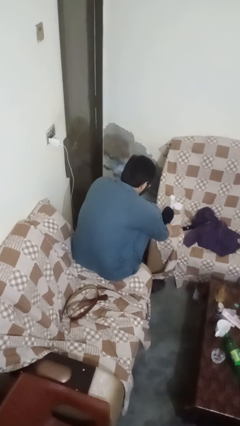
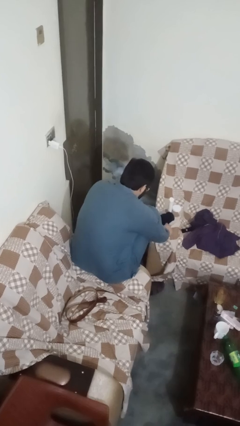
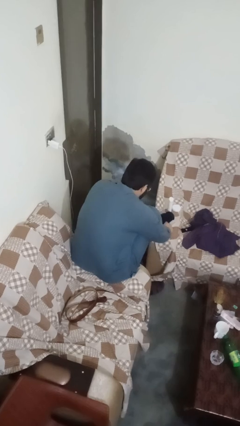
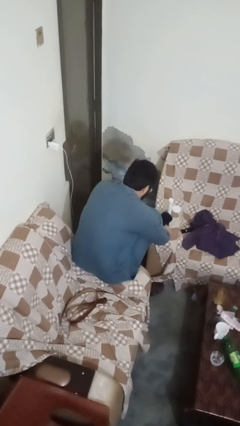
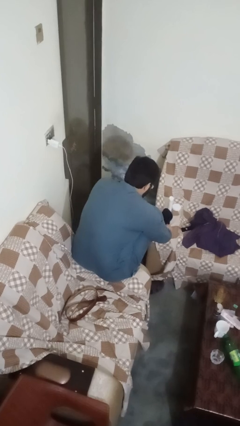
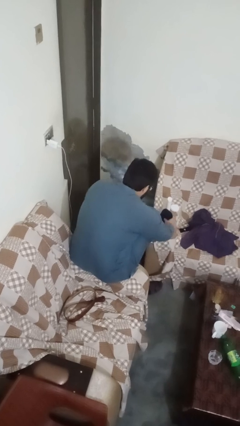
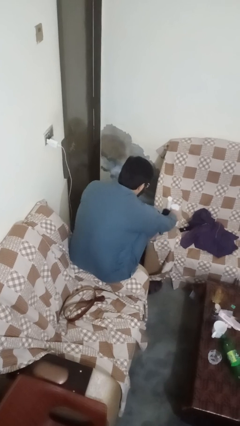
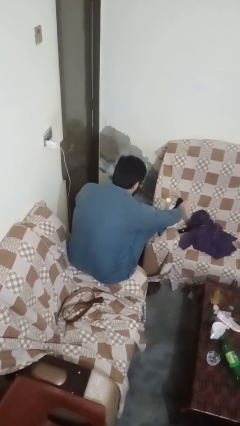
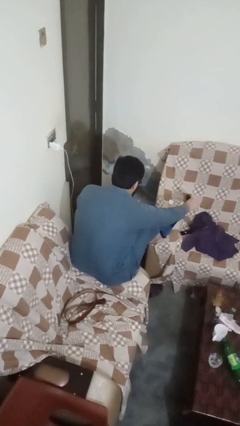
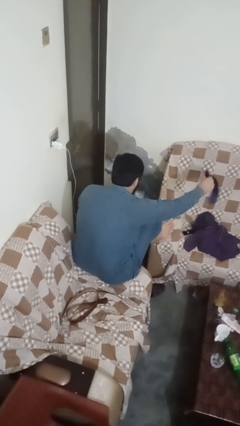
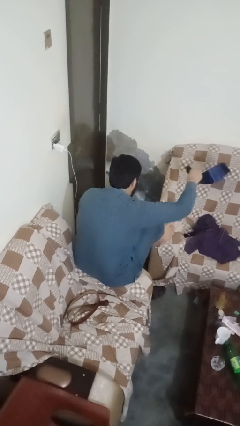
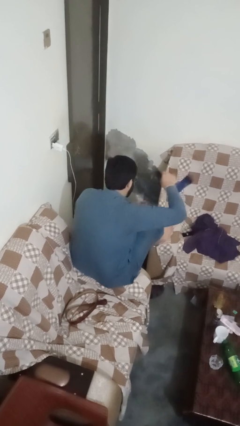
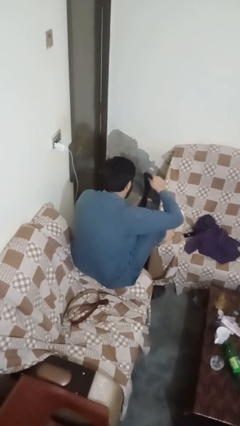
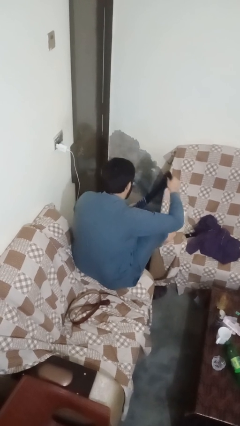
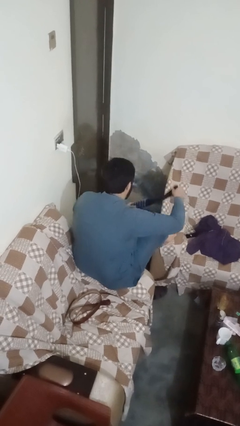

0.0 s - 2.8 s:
person takes off socks

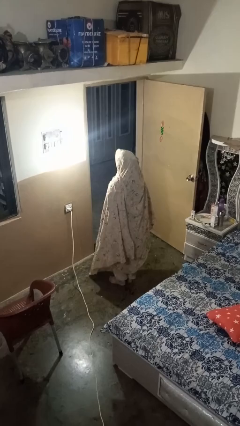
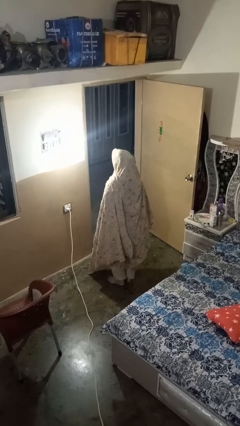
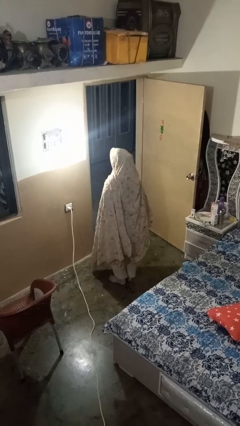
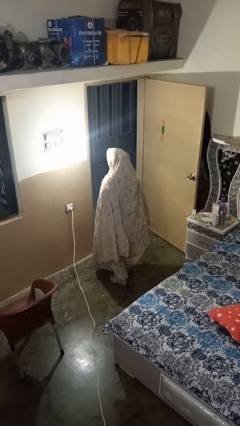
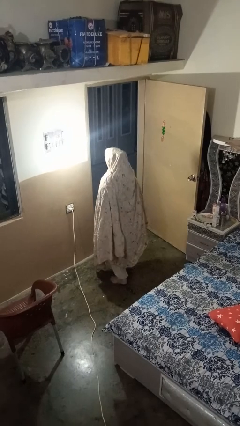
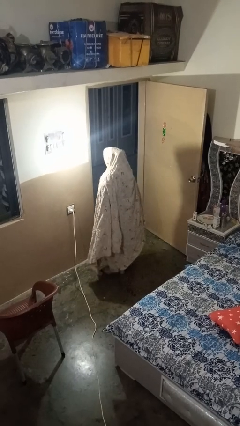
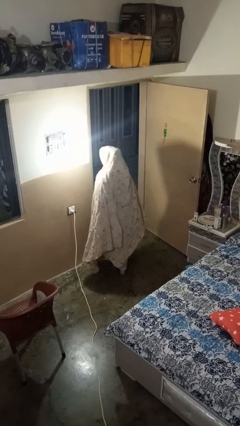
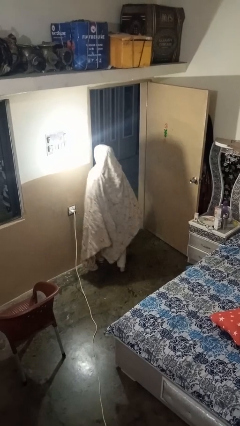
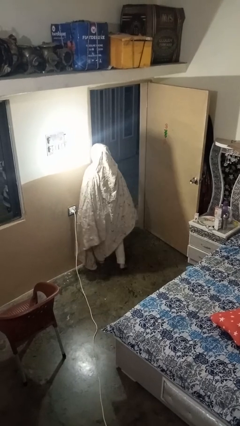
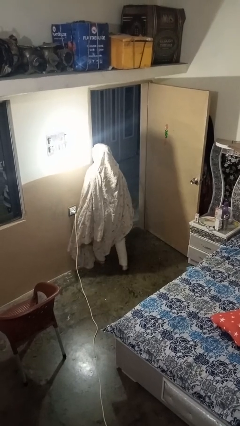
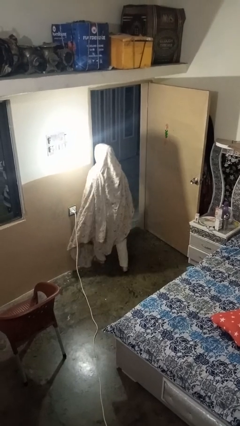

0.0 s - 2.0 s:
person bumps into wall

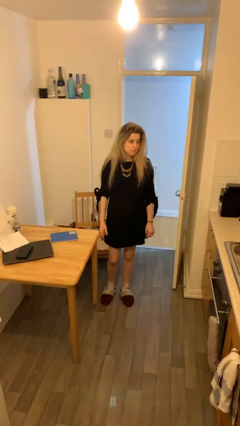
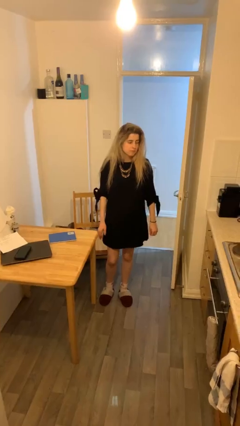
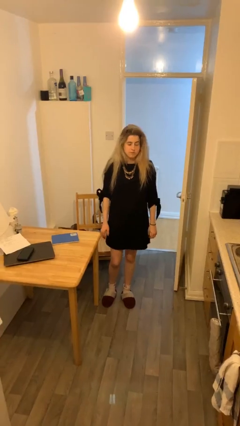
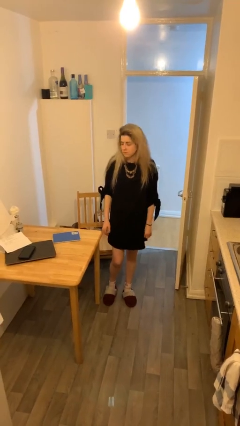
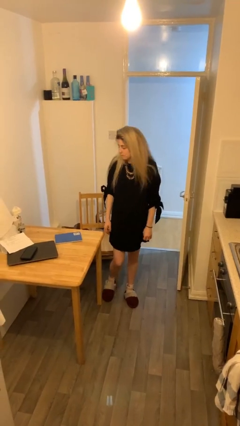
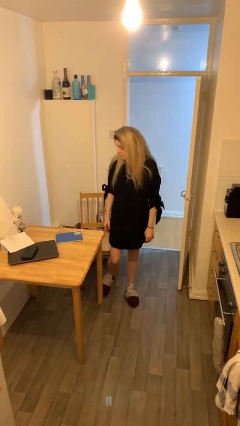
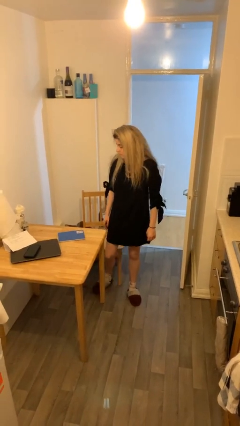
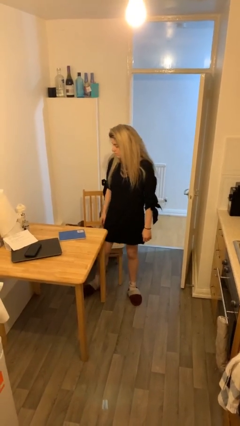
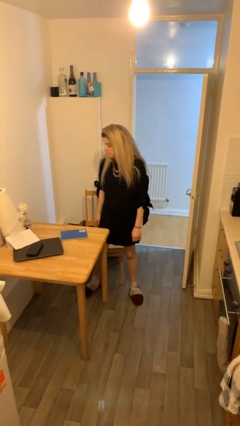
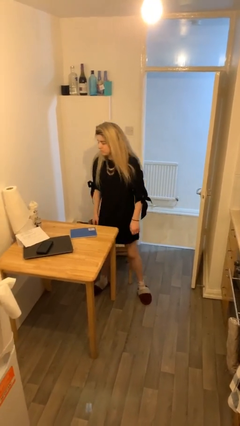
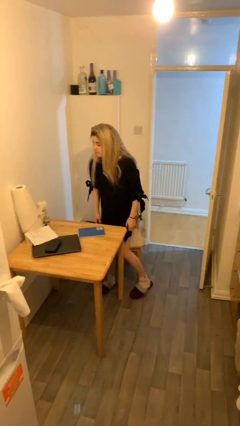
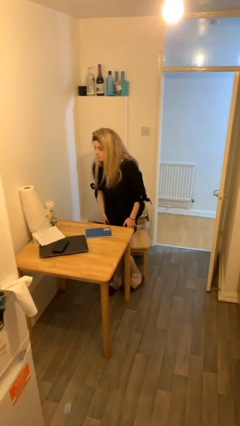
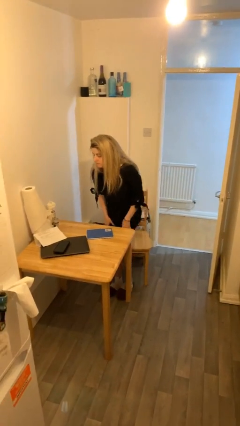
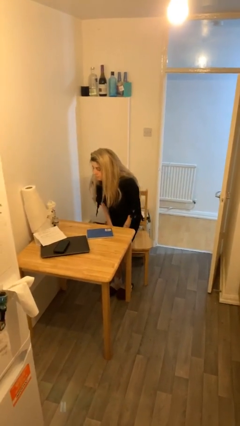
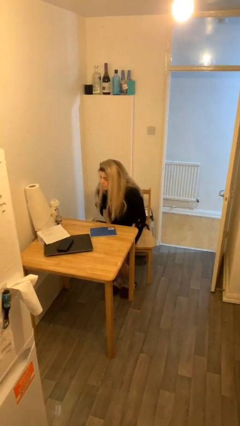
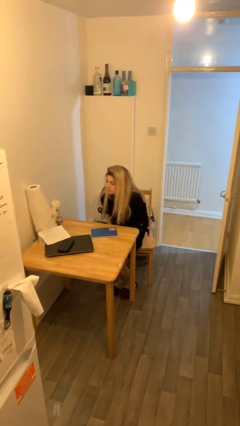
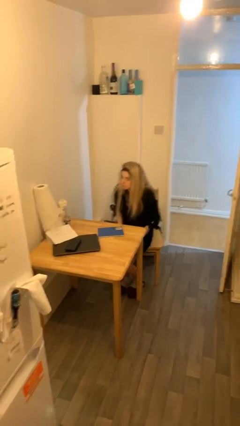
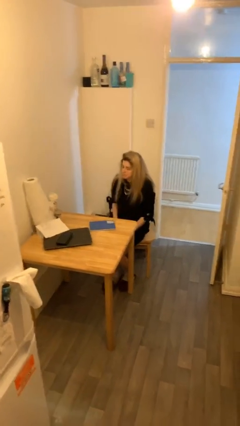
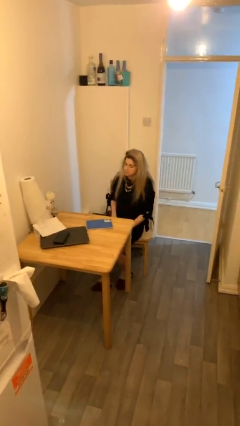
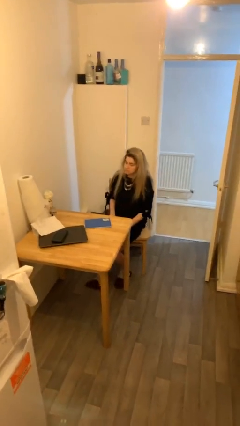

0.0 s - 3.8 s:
person sits down

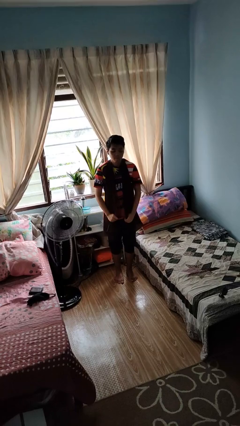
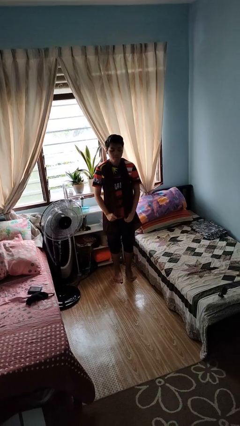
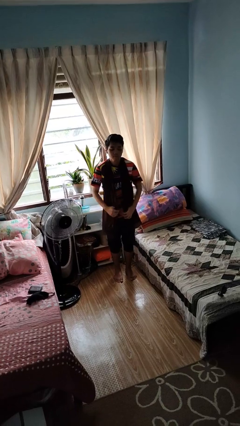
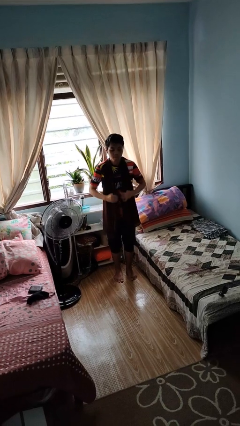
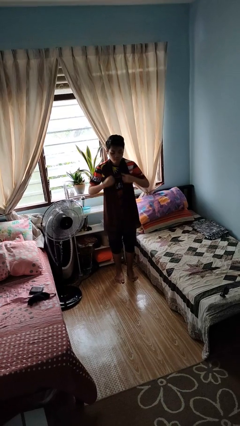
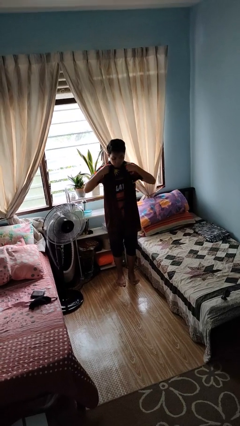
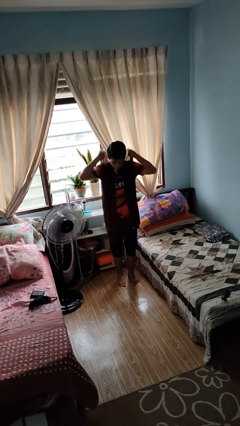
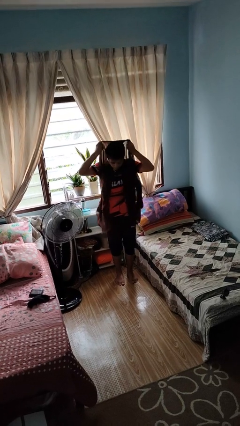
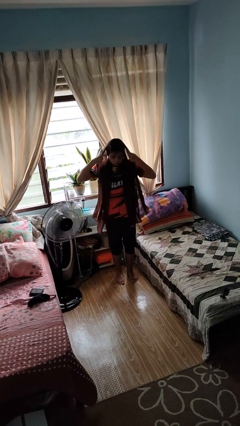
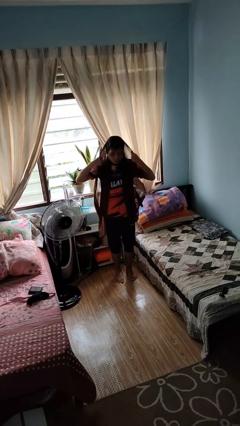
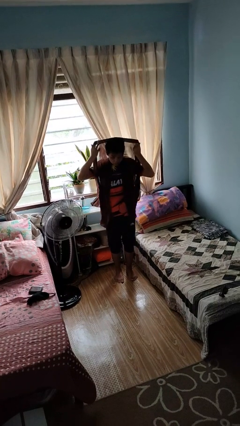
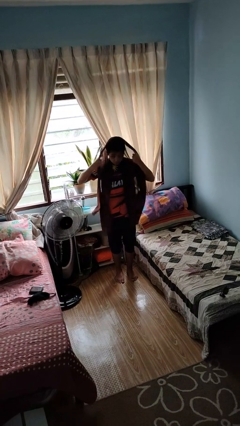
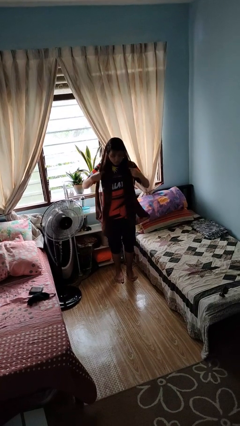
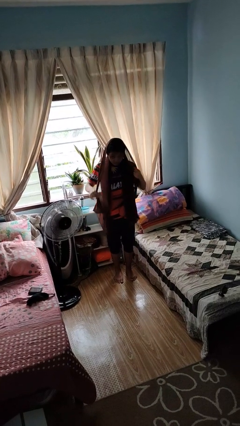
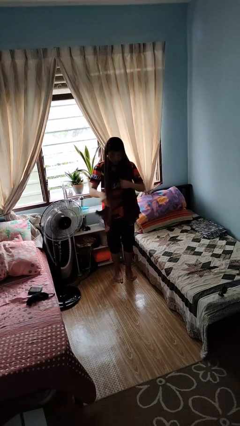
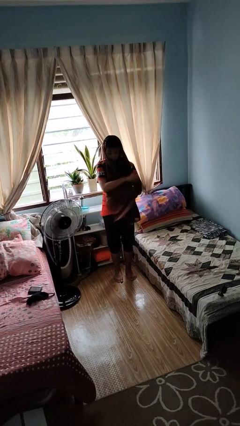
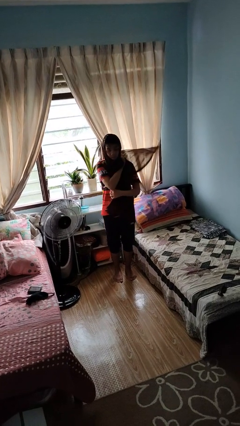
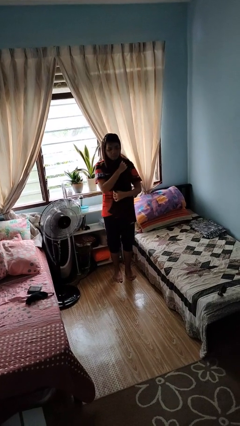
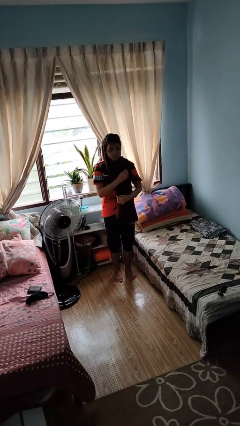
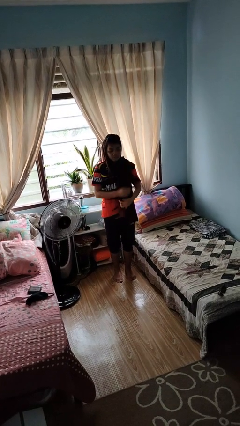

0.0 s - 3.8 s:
person puts on scarf

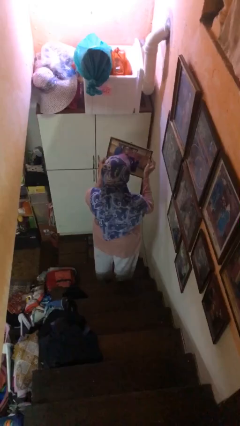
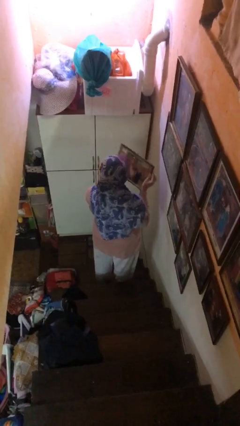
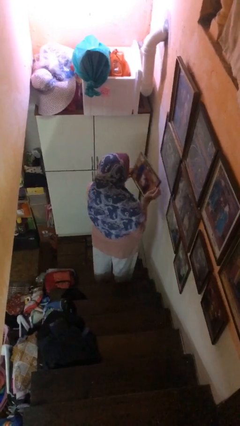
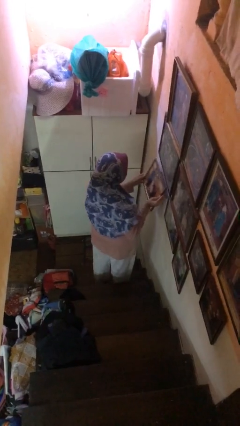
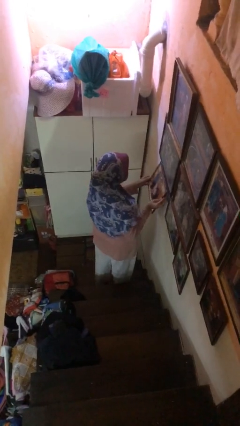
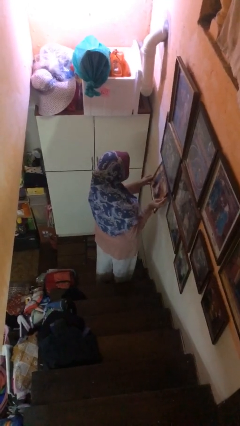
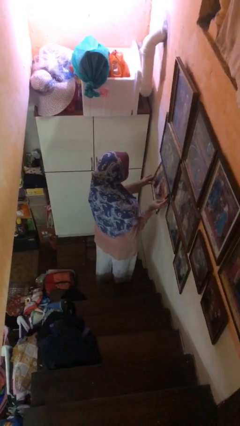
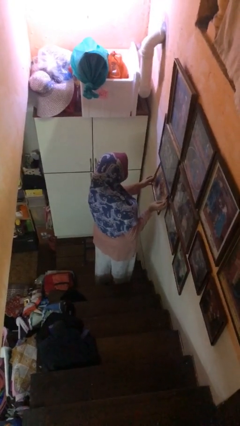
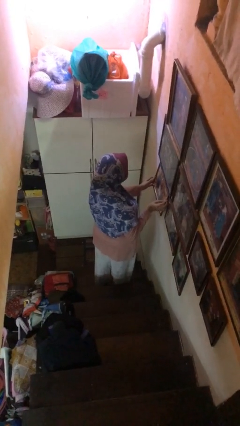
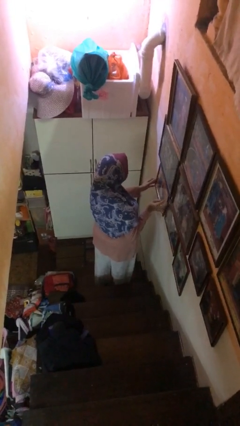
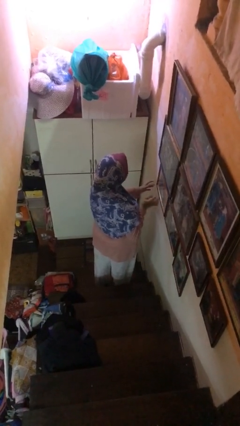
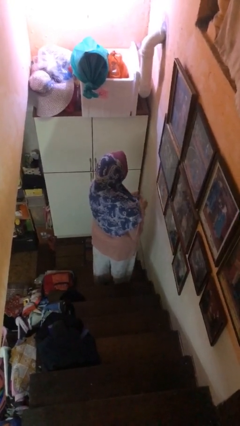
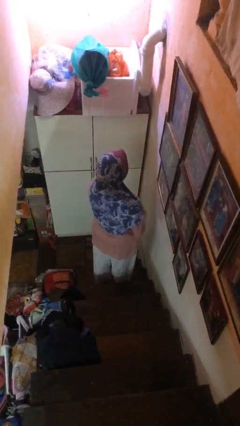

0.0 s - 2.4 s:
person takes down picture frame

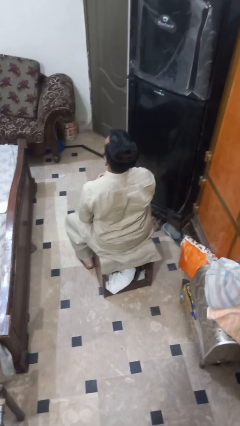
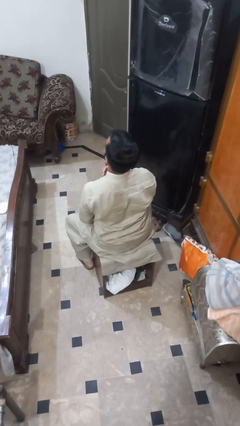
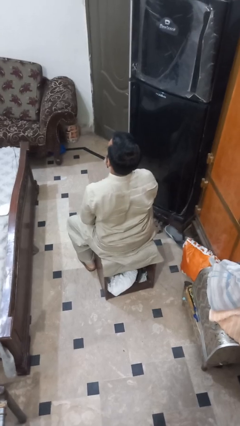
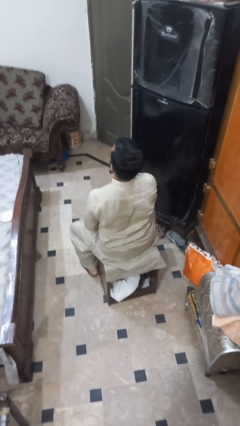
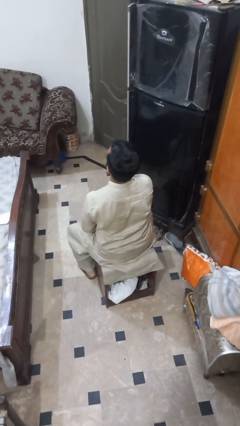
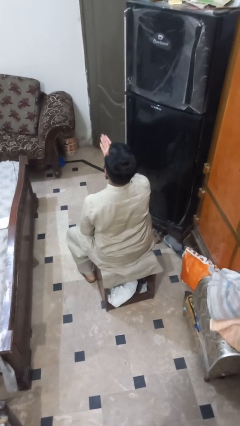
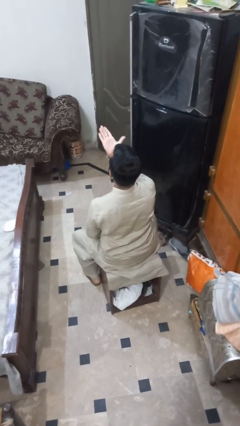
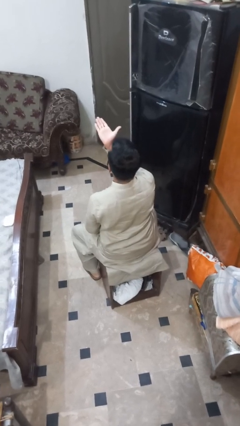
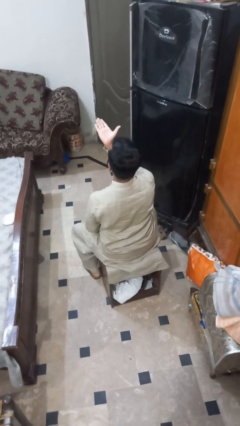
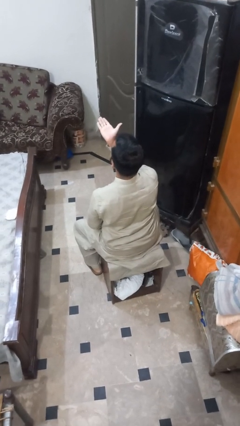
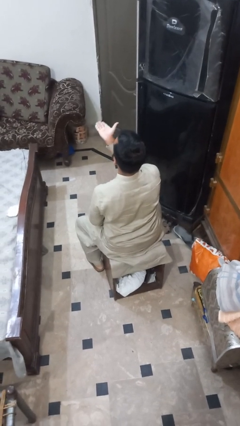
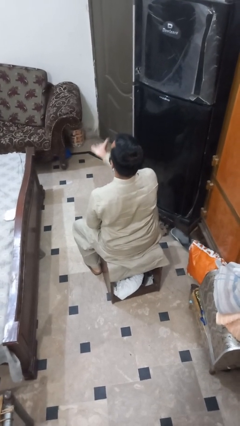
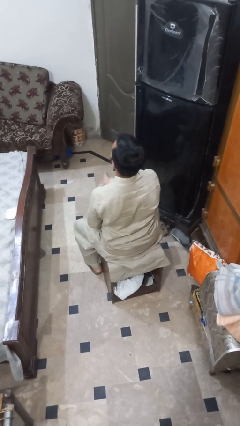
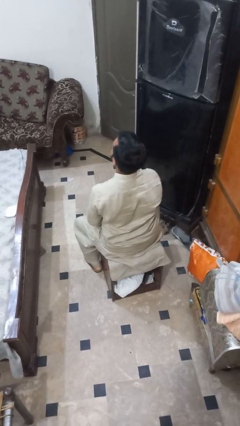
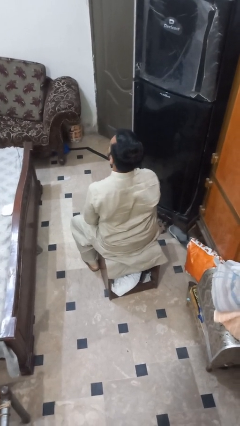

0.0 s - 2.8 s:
person gestures blow kiss
